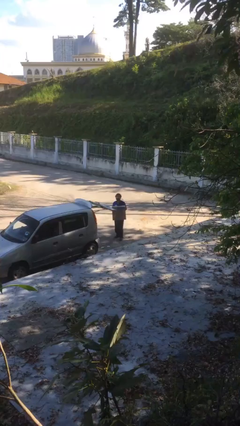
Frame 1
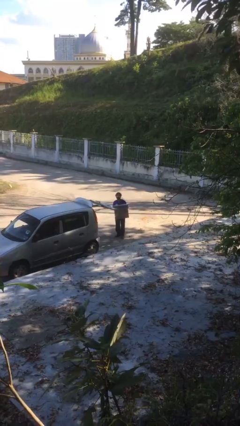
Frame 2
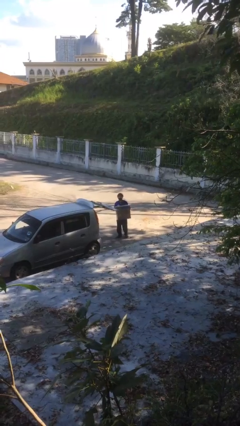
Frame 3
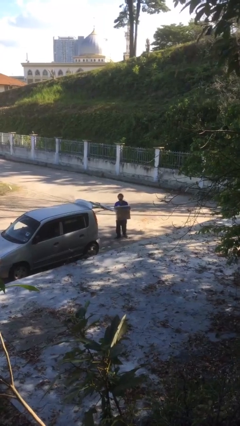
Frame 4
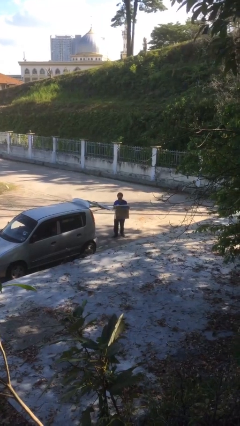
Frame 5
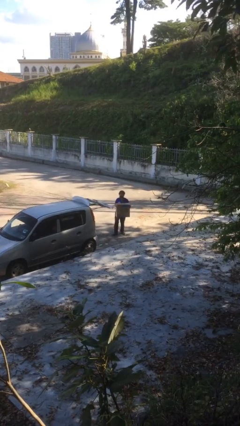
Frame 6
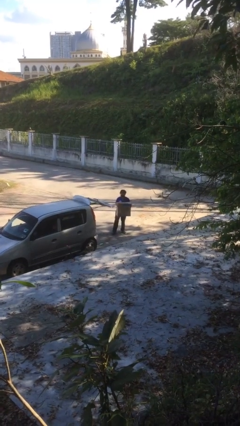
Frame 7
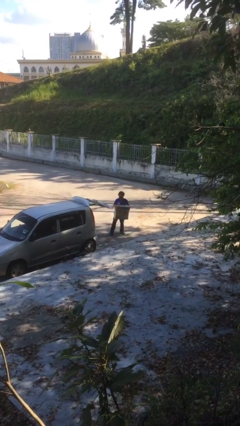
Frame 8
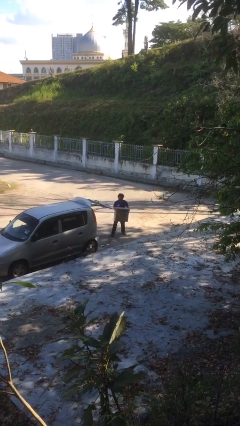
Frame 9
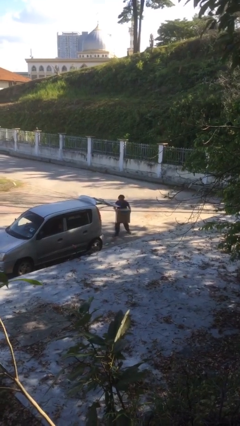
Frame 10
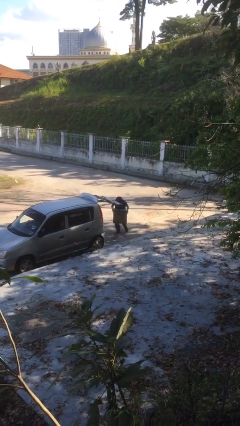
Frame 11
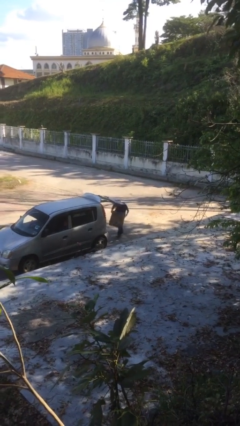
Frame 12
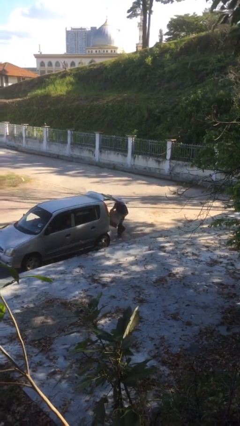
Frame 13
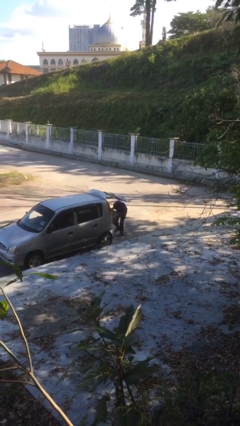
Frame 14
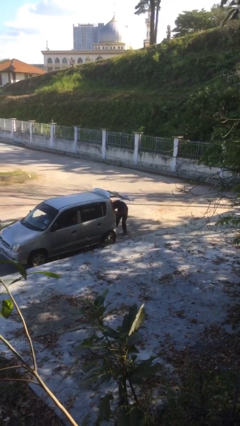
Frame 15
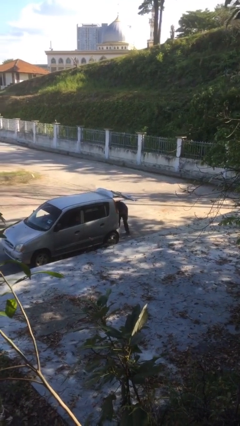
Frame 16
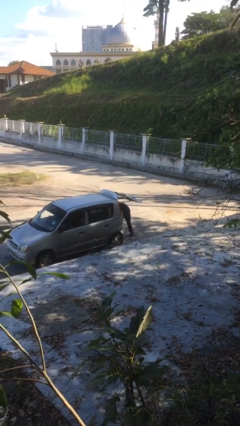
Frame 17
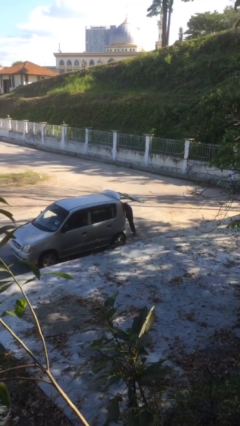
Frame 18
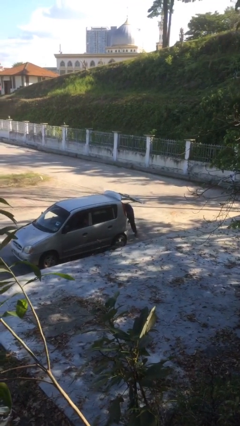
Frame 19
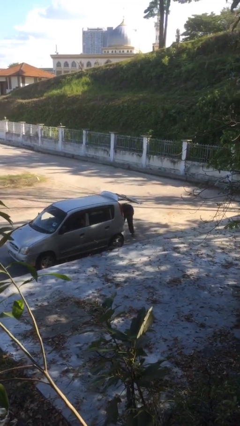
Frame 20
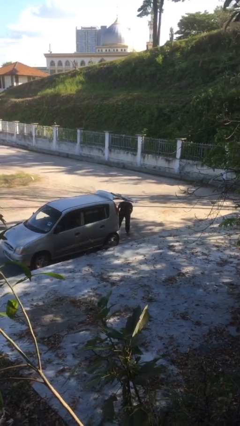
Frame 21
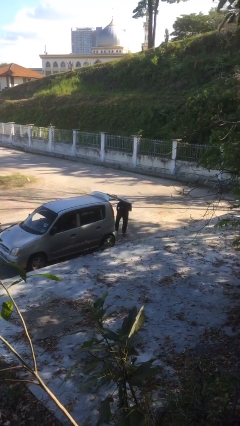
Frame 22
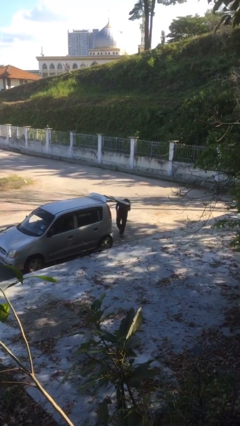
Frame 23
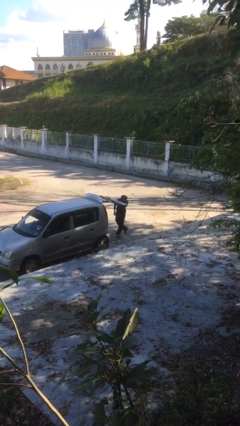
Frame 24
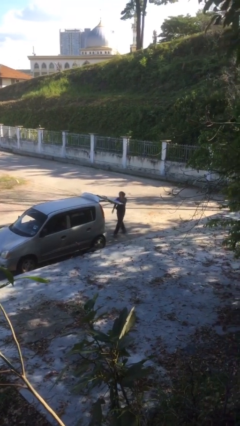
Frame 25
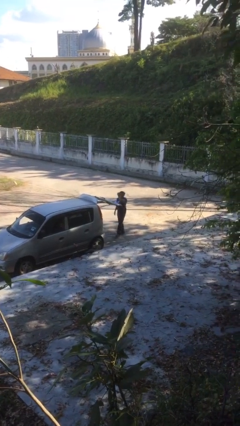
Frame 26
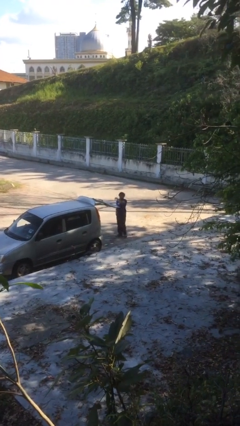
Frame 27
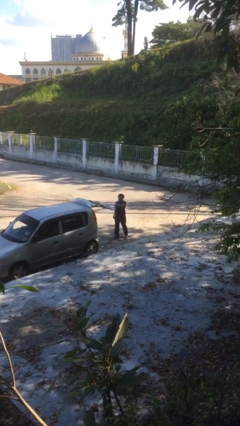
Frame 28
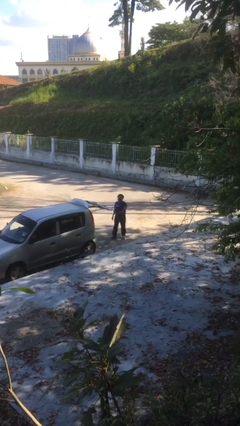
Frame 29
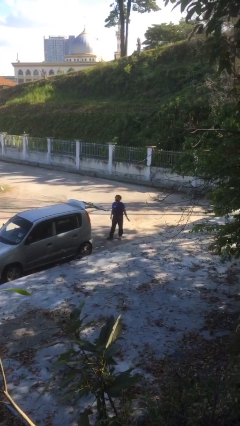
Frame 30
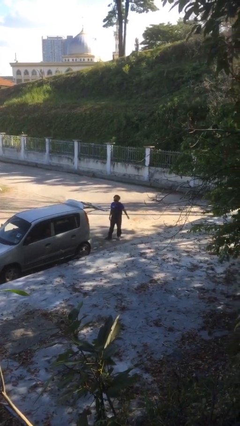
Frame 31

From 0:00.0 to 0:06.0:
person loads car

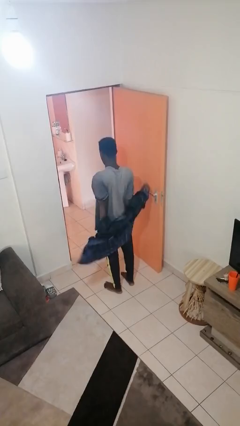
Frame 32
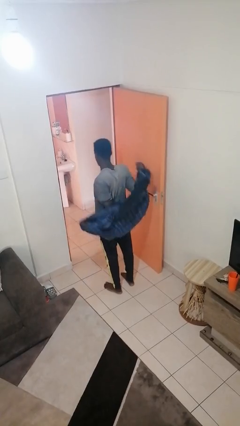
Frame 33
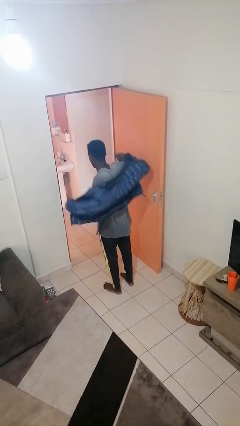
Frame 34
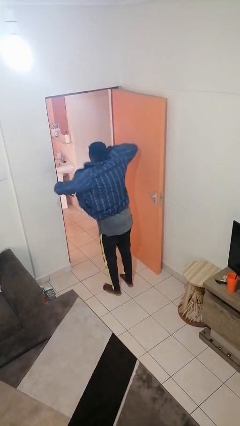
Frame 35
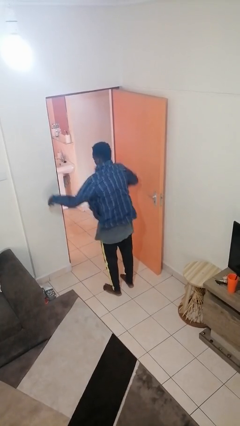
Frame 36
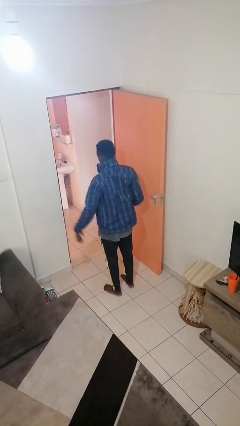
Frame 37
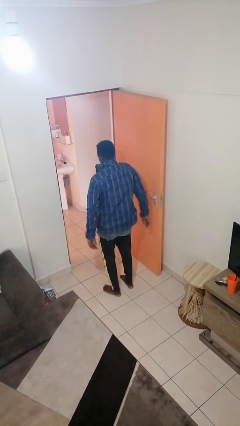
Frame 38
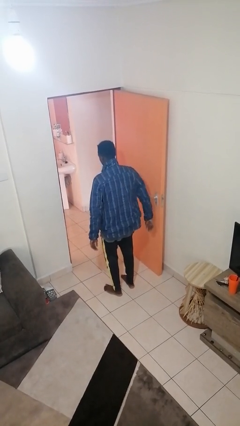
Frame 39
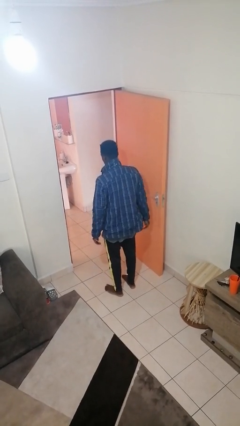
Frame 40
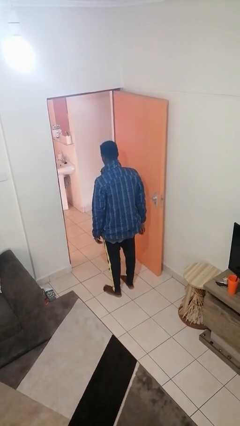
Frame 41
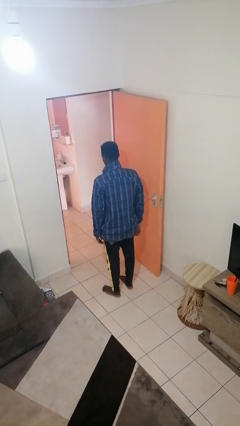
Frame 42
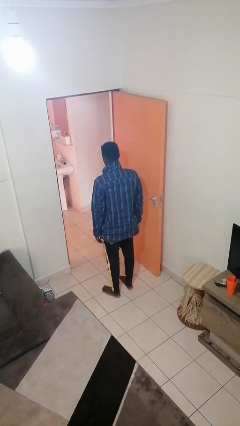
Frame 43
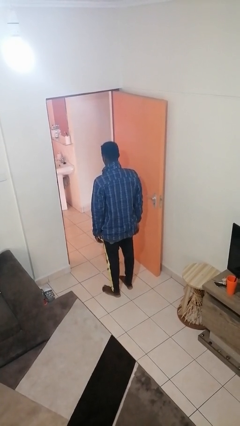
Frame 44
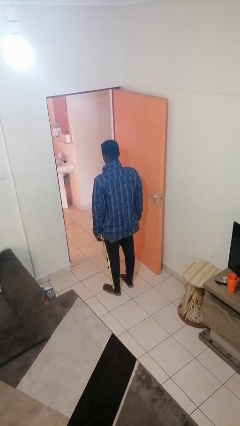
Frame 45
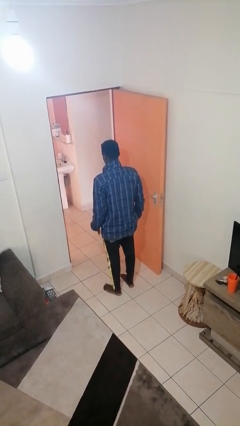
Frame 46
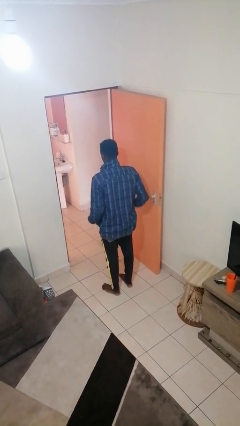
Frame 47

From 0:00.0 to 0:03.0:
person puts on jacket

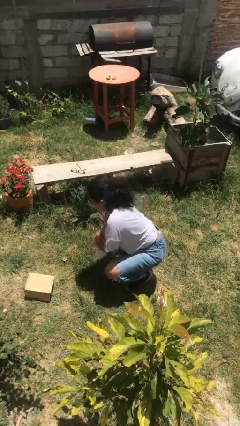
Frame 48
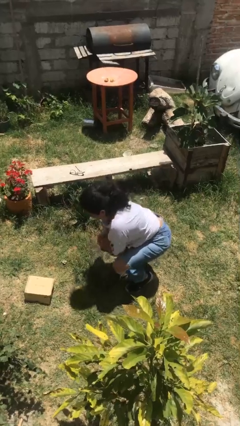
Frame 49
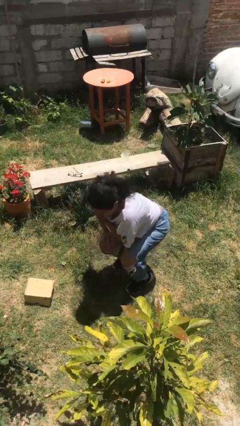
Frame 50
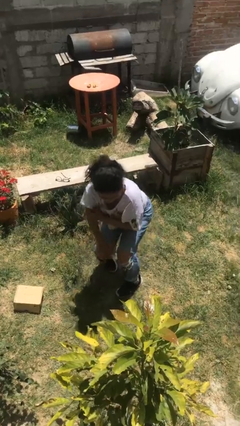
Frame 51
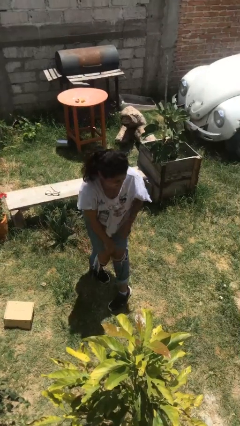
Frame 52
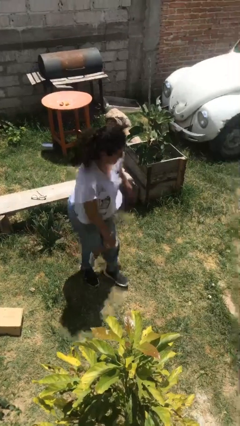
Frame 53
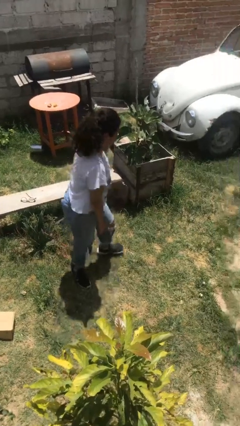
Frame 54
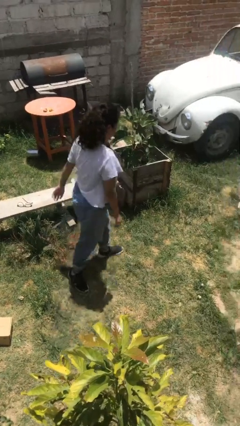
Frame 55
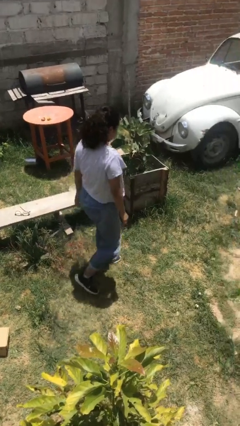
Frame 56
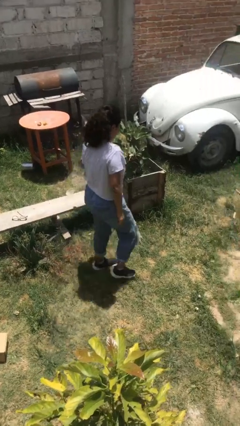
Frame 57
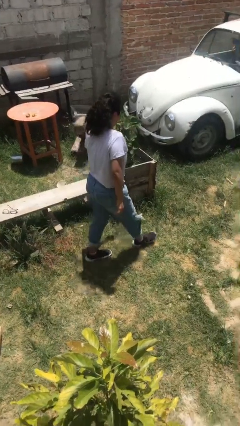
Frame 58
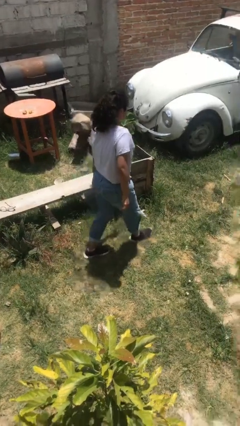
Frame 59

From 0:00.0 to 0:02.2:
person stands up from floor

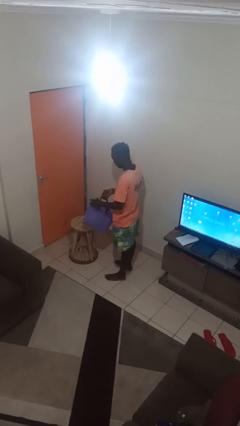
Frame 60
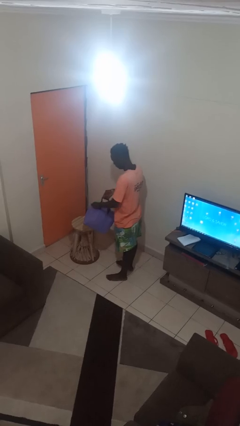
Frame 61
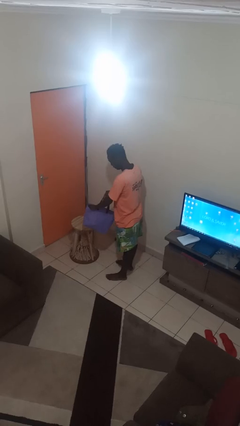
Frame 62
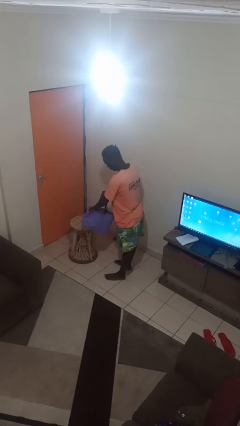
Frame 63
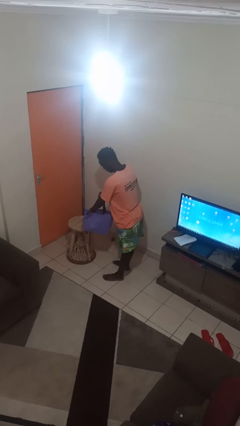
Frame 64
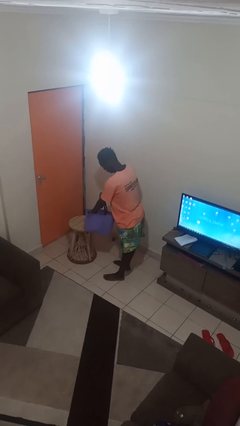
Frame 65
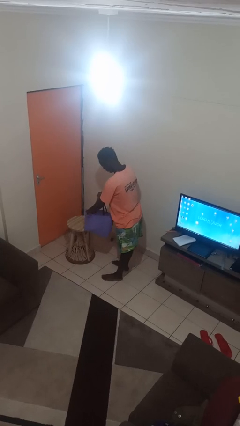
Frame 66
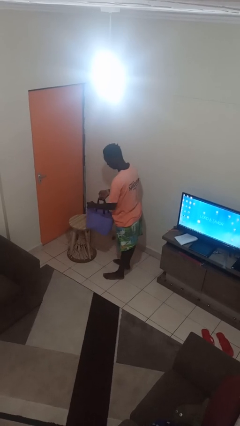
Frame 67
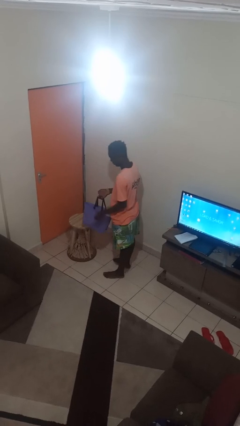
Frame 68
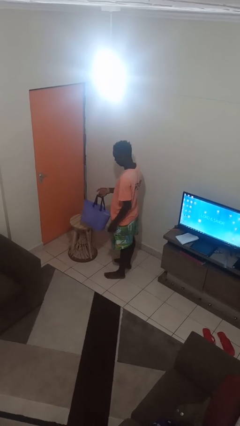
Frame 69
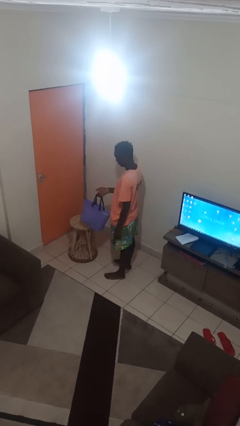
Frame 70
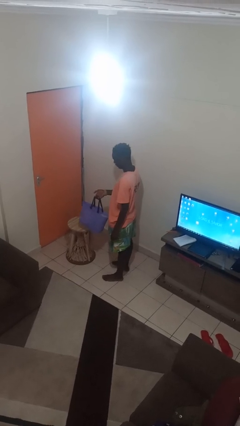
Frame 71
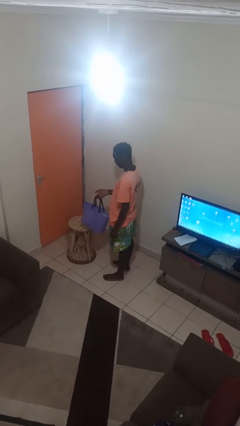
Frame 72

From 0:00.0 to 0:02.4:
person puts object into bag

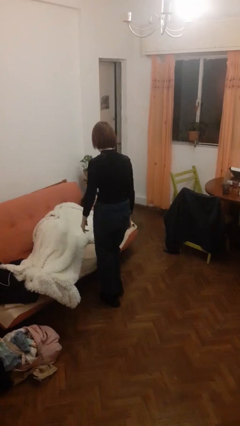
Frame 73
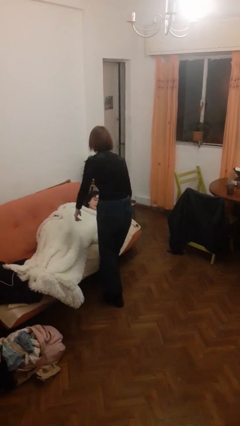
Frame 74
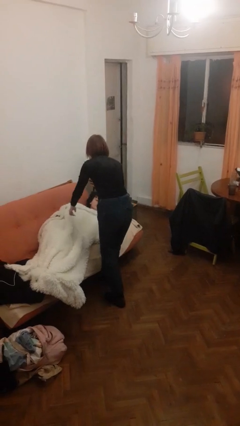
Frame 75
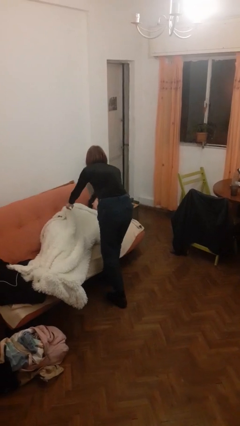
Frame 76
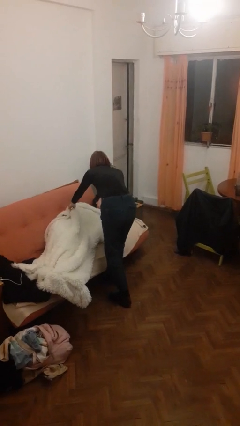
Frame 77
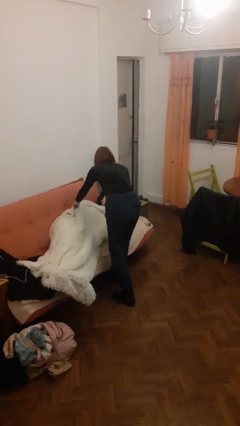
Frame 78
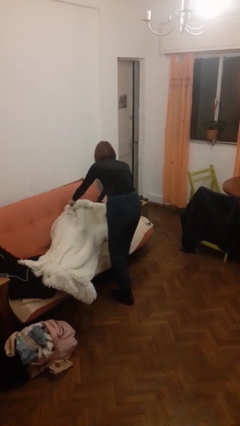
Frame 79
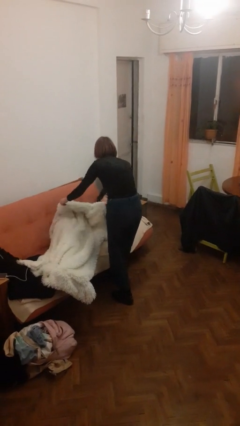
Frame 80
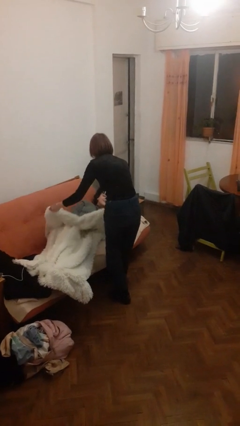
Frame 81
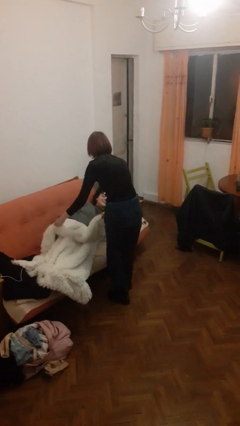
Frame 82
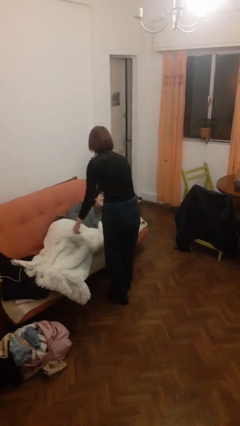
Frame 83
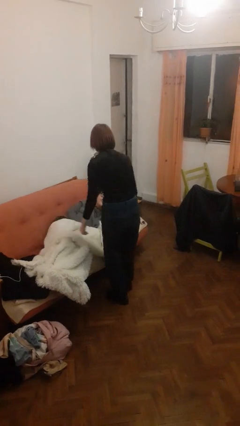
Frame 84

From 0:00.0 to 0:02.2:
person uncovers friend with blanket

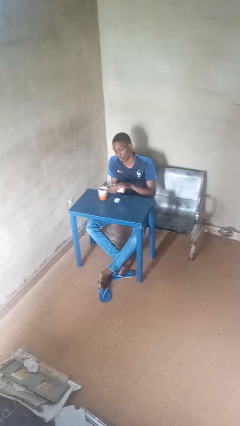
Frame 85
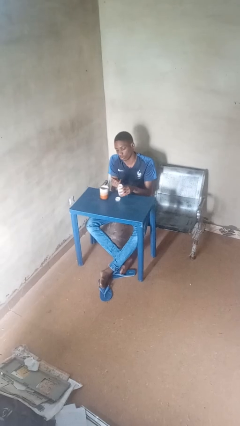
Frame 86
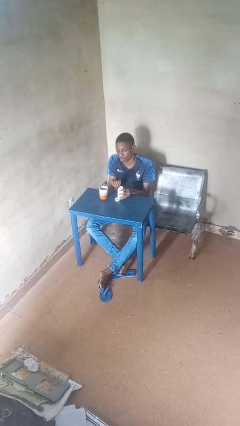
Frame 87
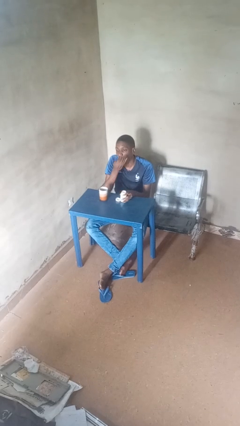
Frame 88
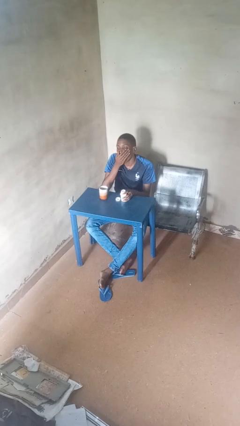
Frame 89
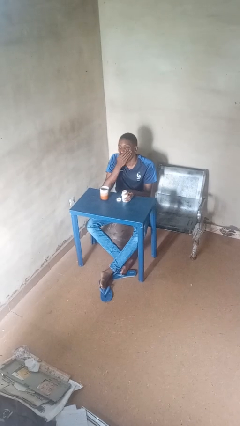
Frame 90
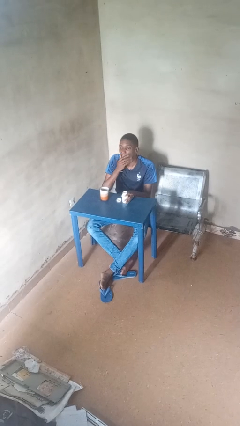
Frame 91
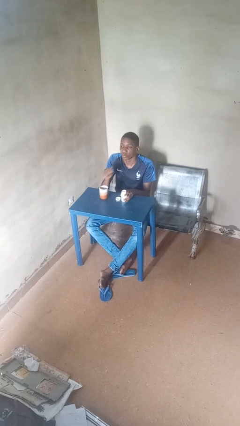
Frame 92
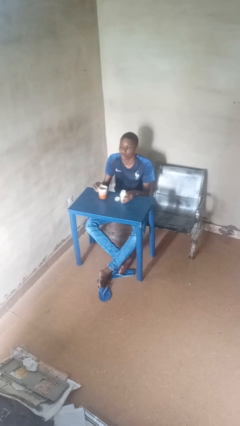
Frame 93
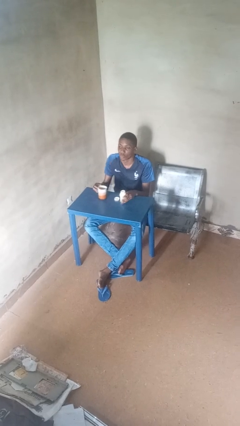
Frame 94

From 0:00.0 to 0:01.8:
person takes medicine pills
